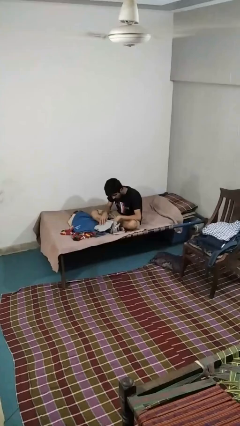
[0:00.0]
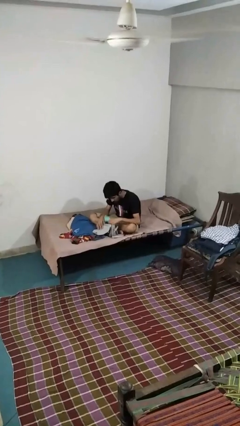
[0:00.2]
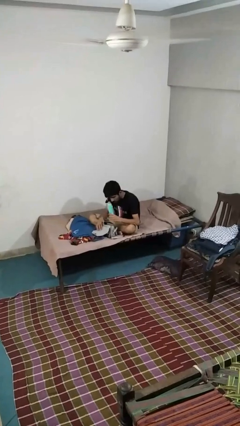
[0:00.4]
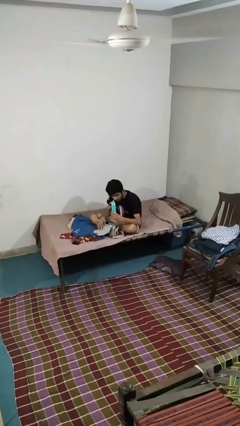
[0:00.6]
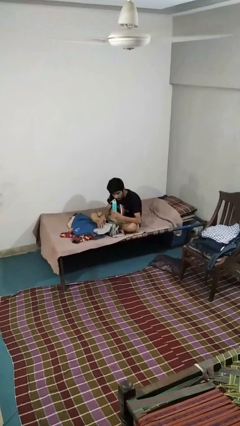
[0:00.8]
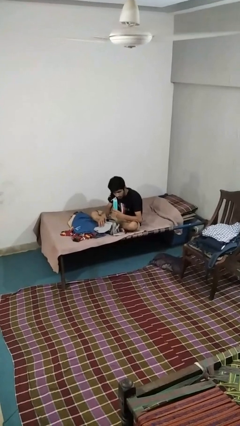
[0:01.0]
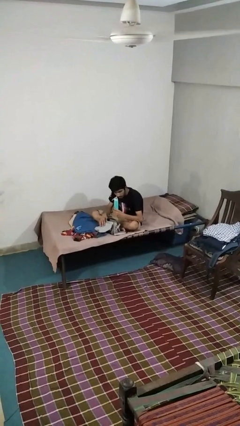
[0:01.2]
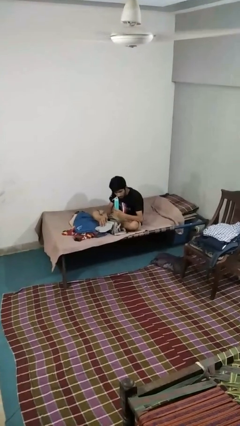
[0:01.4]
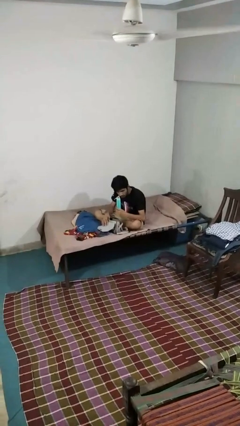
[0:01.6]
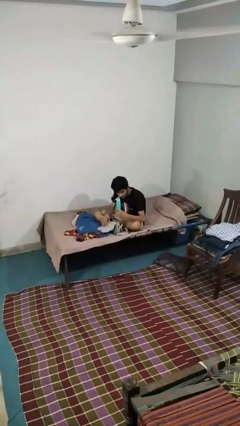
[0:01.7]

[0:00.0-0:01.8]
person takes object from purse

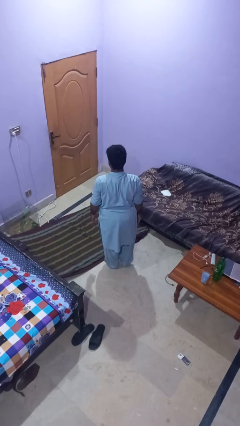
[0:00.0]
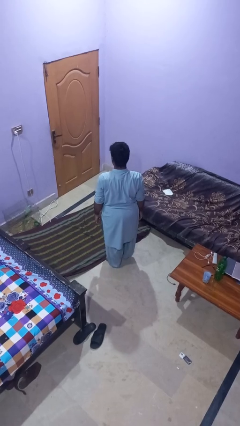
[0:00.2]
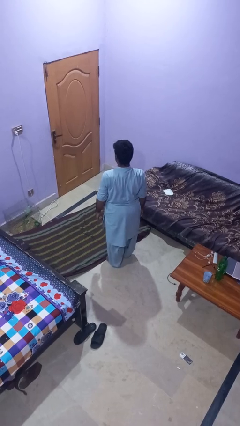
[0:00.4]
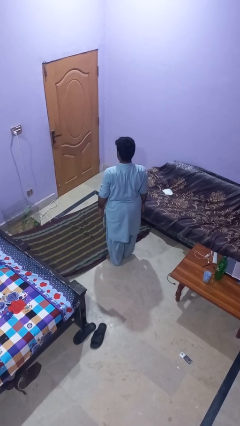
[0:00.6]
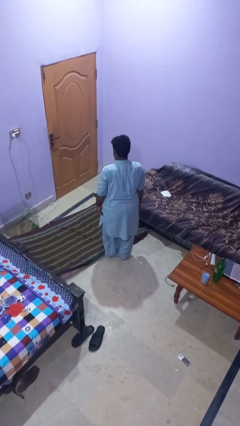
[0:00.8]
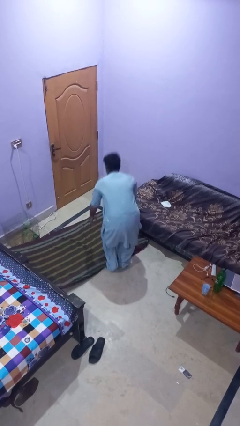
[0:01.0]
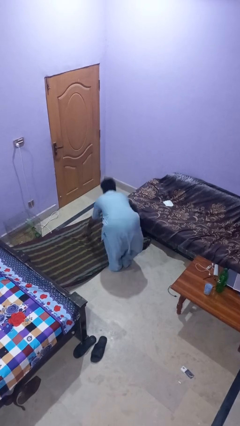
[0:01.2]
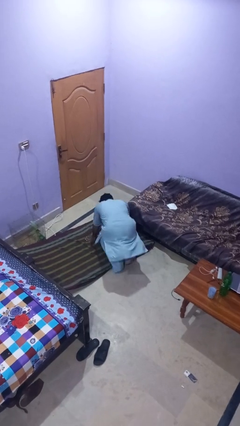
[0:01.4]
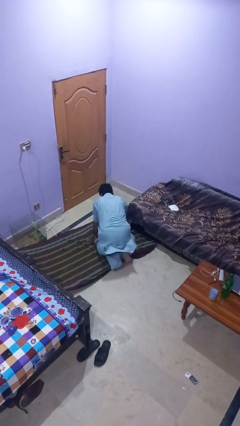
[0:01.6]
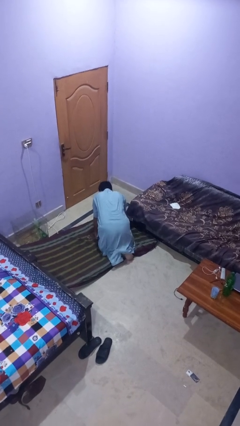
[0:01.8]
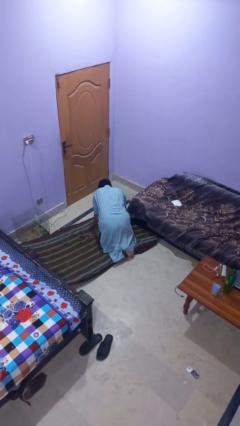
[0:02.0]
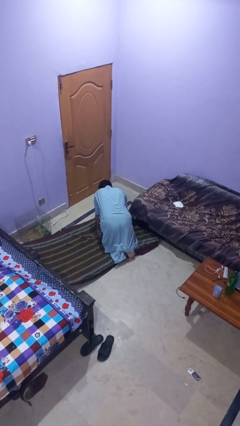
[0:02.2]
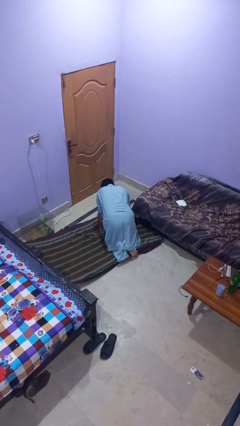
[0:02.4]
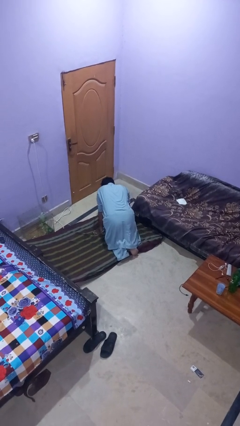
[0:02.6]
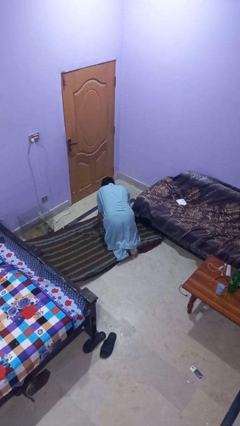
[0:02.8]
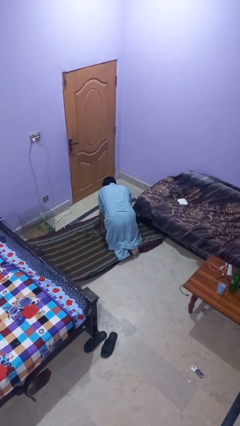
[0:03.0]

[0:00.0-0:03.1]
person trips on object on floor

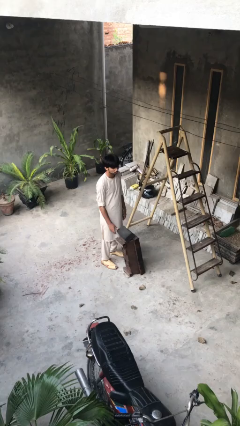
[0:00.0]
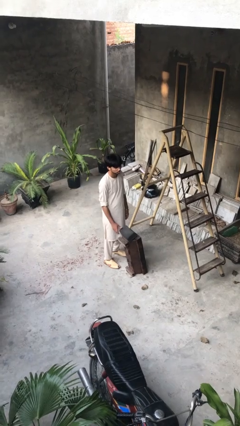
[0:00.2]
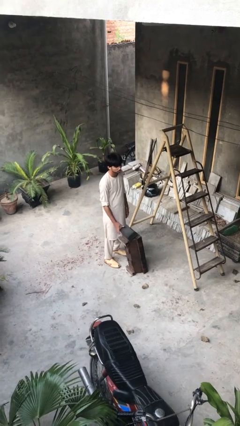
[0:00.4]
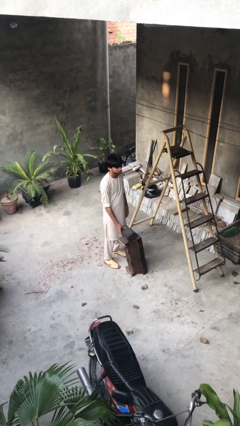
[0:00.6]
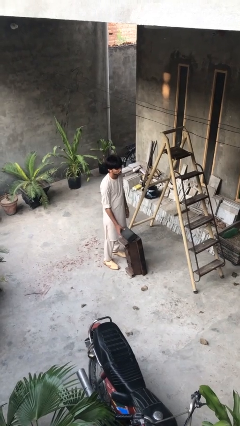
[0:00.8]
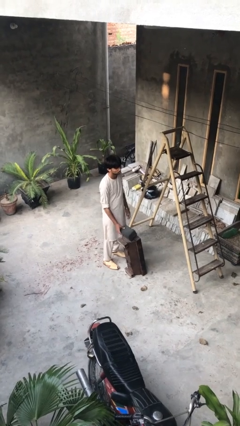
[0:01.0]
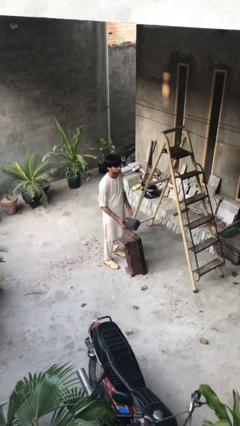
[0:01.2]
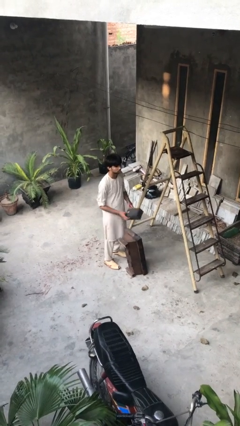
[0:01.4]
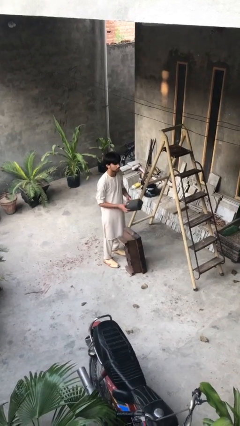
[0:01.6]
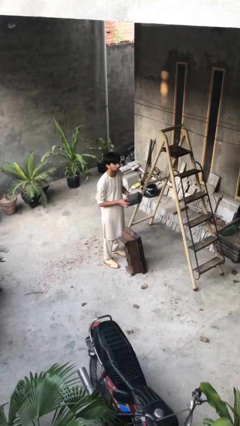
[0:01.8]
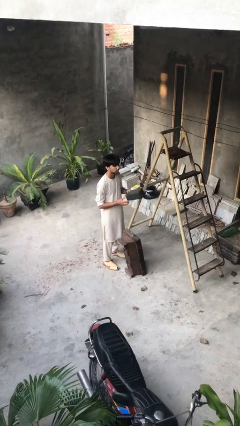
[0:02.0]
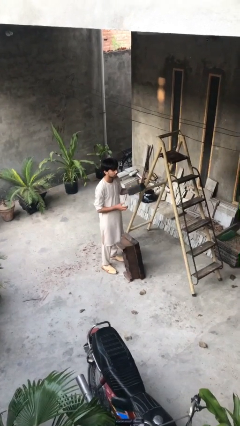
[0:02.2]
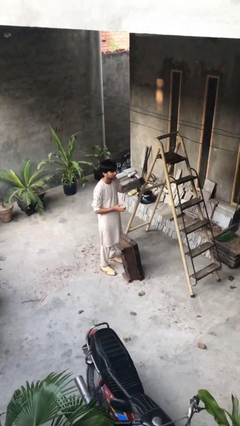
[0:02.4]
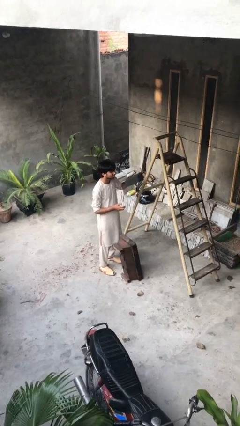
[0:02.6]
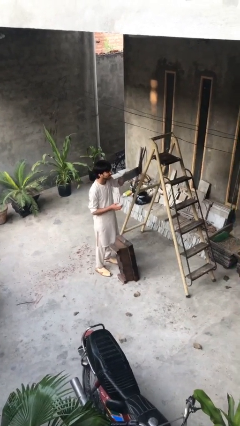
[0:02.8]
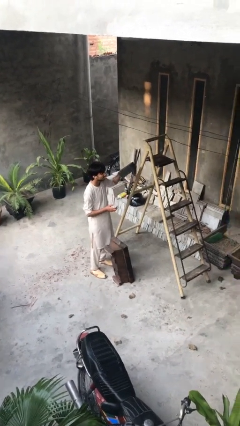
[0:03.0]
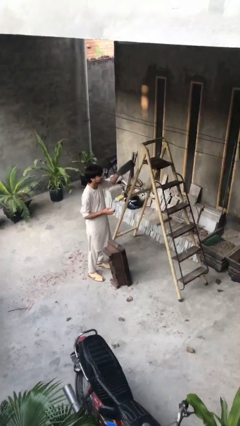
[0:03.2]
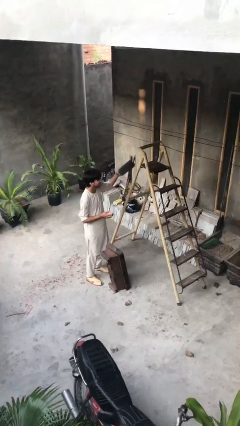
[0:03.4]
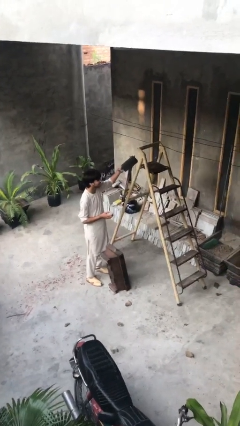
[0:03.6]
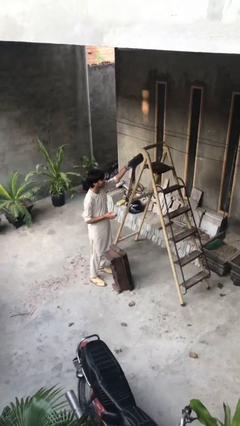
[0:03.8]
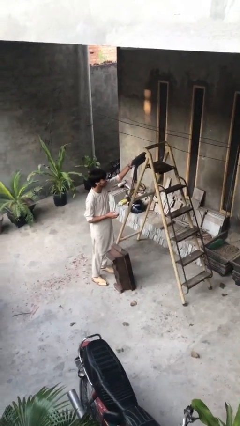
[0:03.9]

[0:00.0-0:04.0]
person picks up object from table

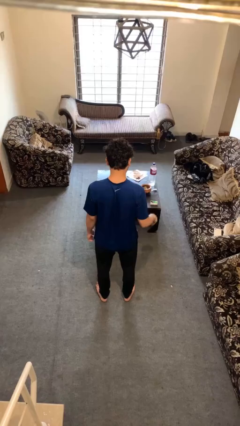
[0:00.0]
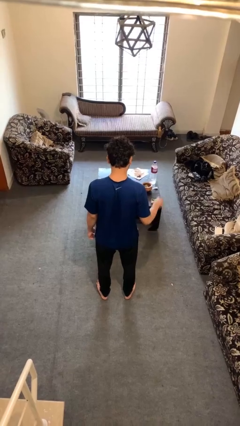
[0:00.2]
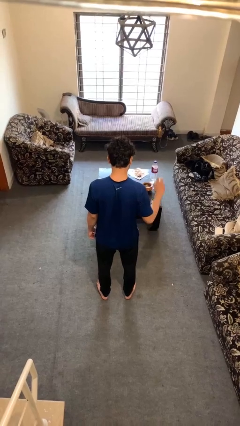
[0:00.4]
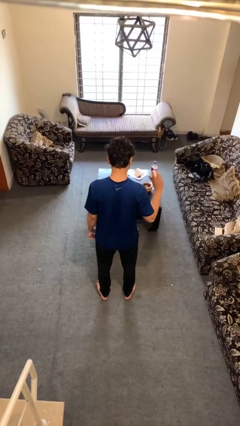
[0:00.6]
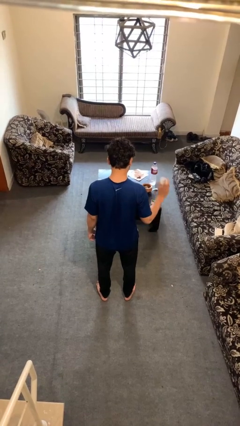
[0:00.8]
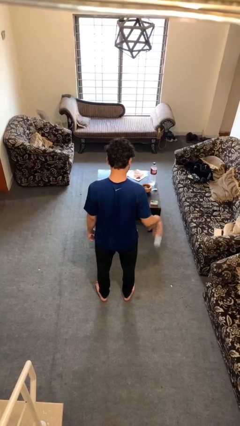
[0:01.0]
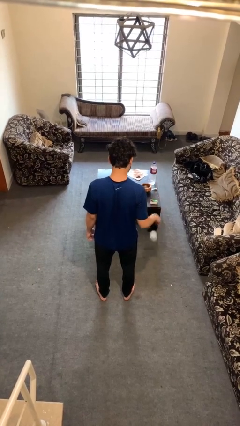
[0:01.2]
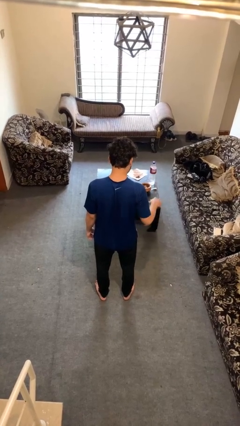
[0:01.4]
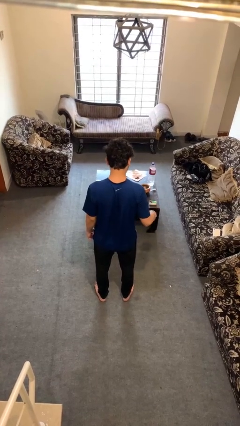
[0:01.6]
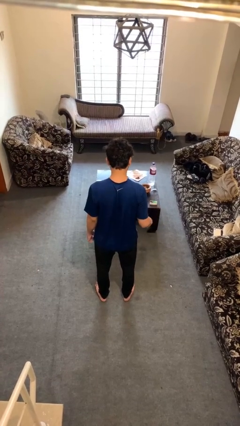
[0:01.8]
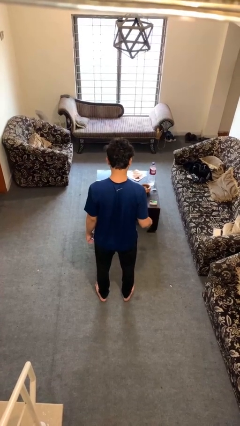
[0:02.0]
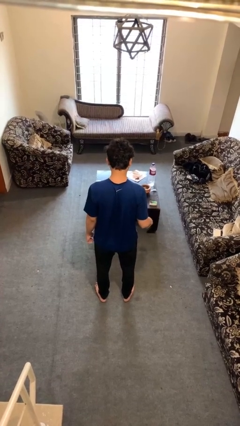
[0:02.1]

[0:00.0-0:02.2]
person bounces ball on floor

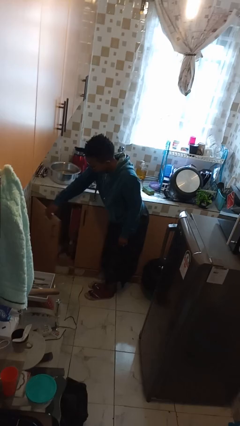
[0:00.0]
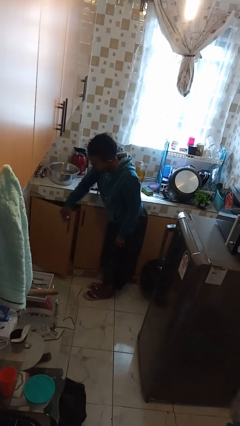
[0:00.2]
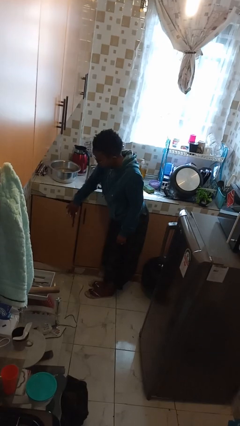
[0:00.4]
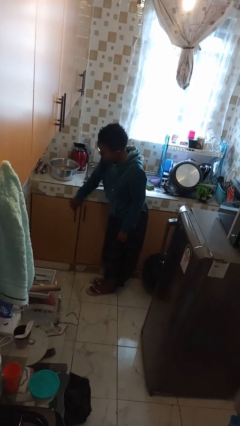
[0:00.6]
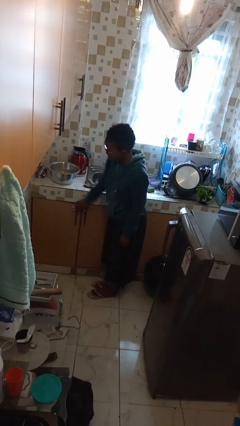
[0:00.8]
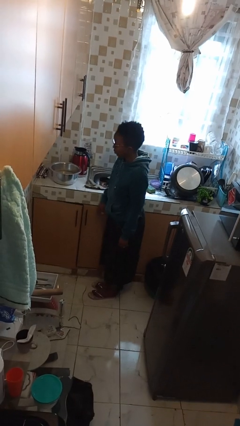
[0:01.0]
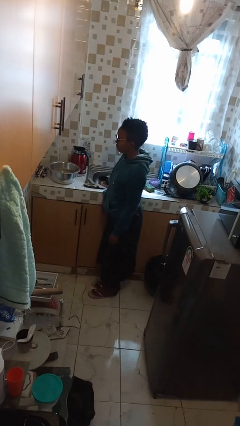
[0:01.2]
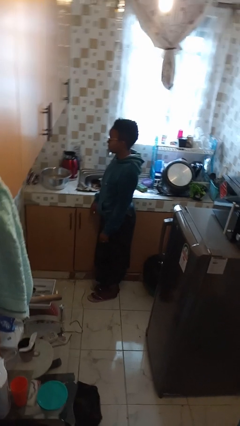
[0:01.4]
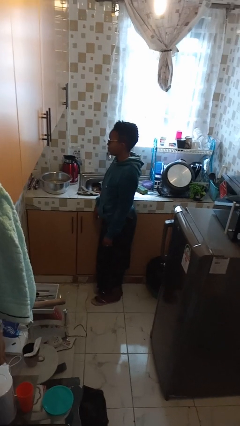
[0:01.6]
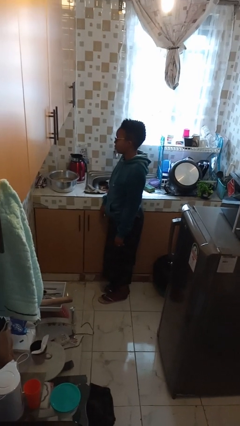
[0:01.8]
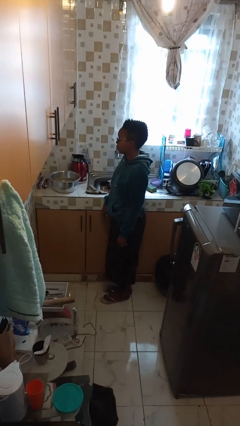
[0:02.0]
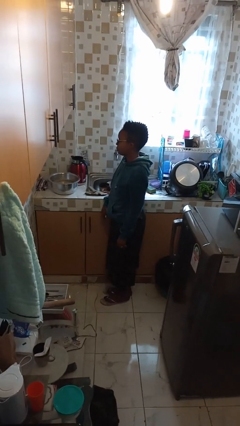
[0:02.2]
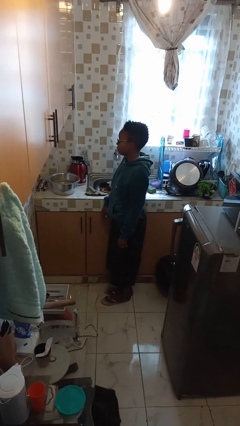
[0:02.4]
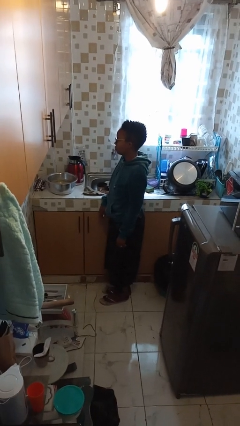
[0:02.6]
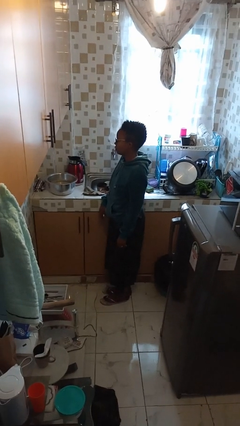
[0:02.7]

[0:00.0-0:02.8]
person closes cabinet

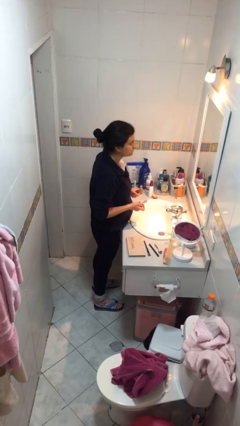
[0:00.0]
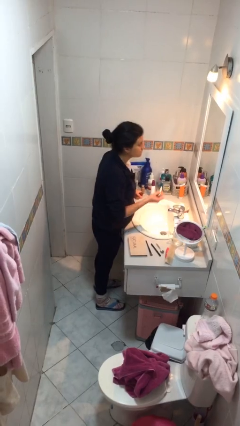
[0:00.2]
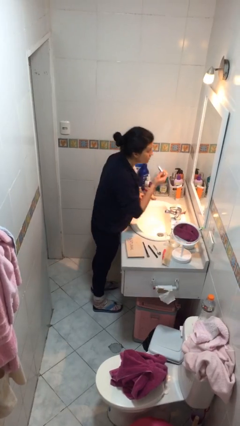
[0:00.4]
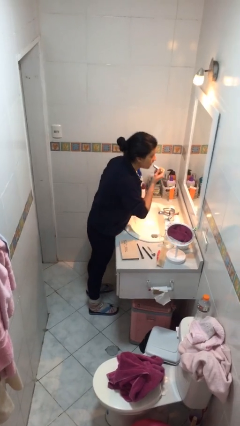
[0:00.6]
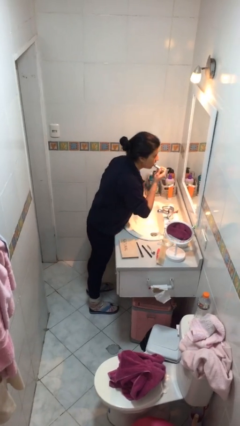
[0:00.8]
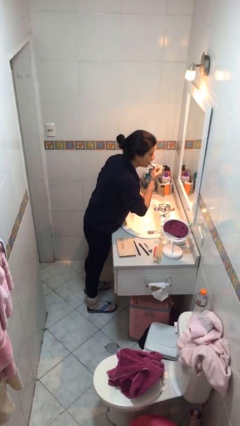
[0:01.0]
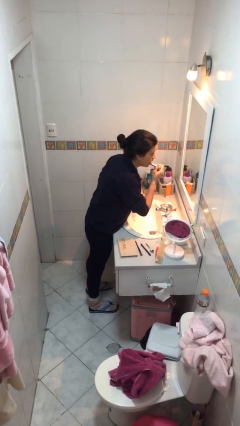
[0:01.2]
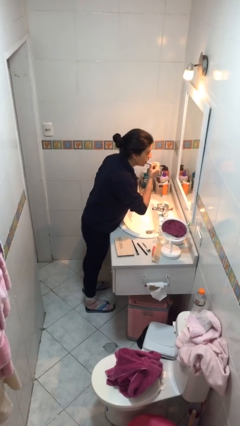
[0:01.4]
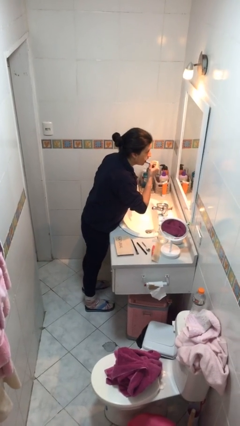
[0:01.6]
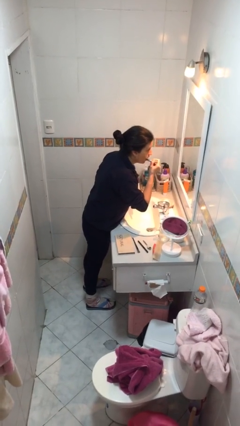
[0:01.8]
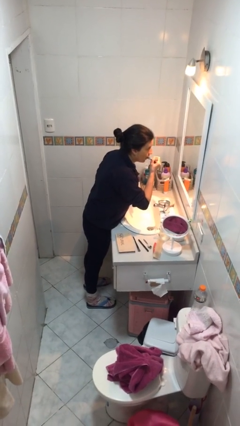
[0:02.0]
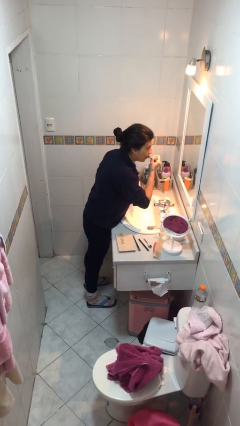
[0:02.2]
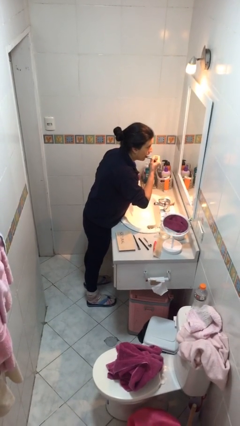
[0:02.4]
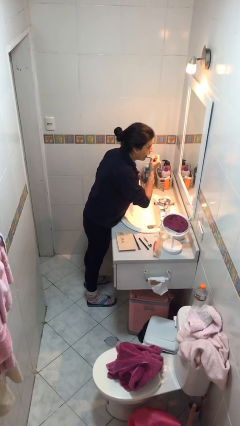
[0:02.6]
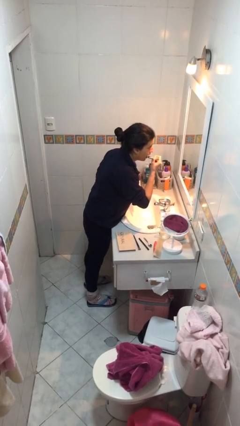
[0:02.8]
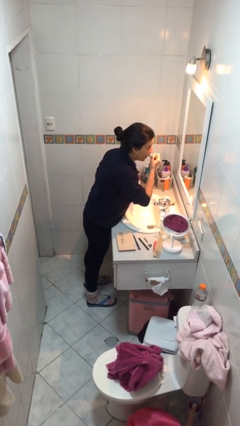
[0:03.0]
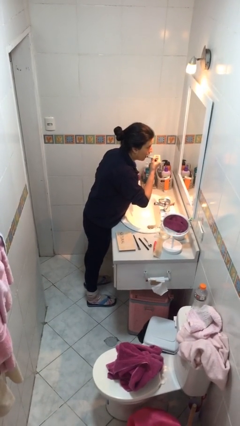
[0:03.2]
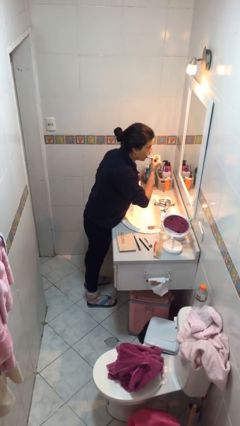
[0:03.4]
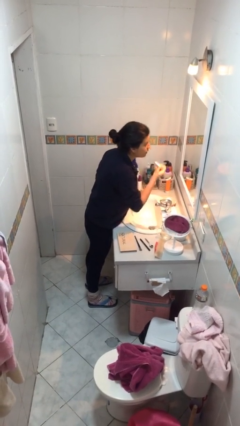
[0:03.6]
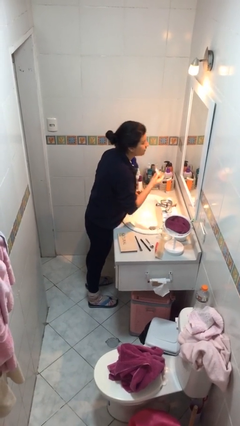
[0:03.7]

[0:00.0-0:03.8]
person applies lip makeup
